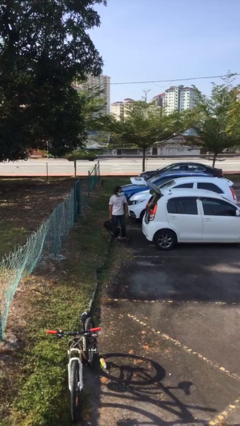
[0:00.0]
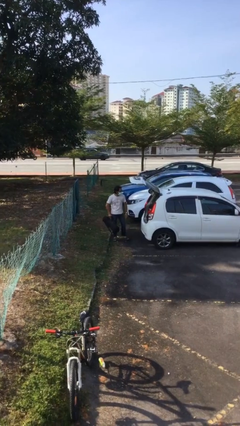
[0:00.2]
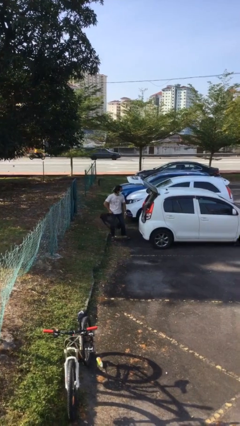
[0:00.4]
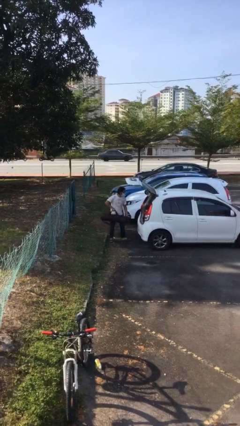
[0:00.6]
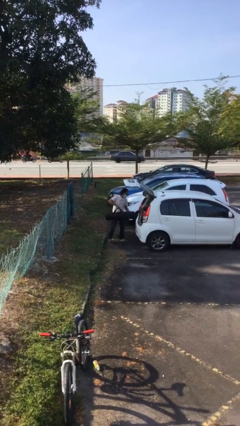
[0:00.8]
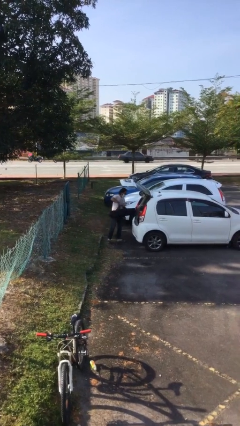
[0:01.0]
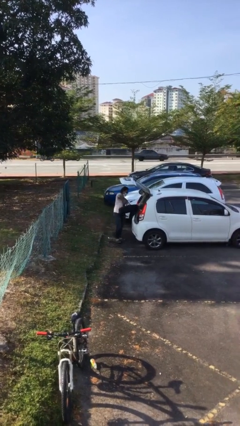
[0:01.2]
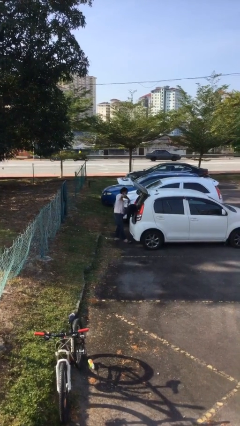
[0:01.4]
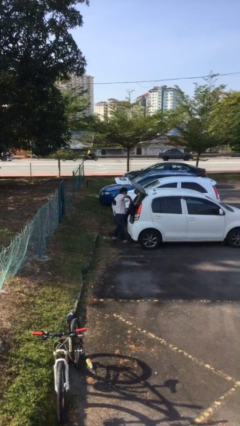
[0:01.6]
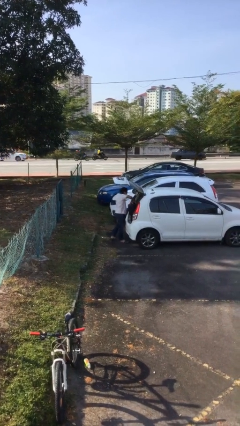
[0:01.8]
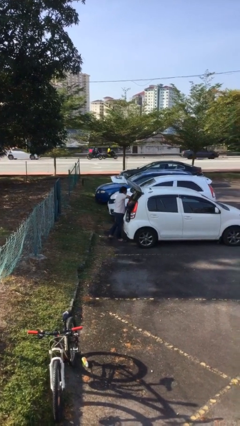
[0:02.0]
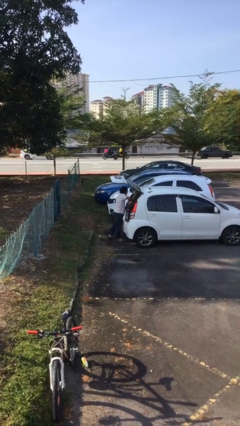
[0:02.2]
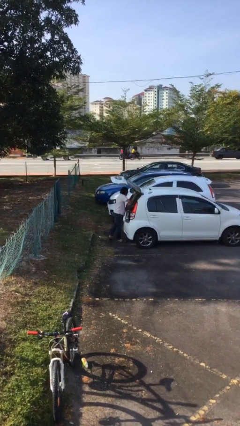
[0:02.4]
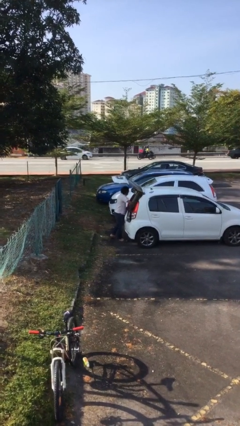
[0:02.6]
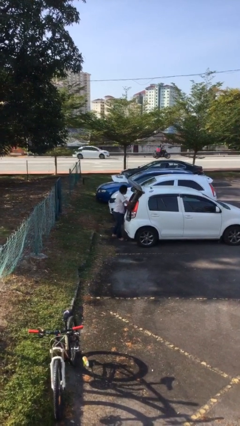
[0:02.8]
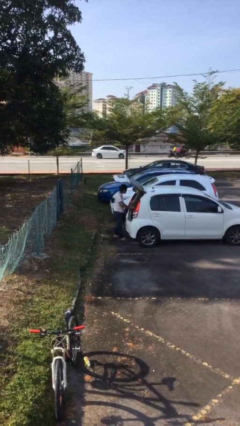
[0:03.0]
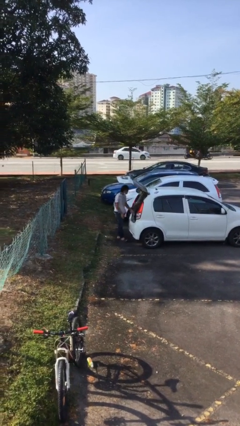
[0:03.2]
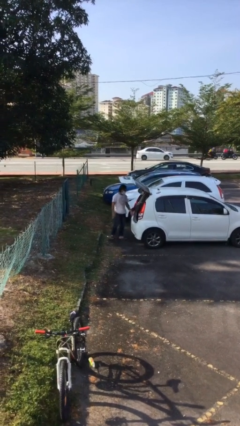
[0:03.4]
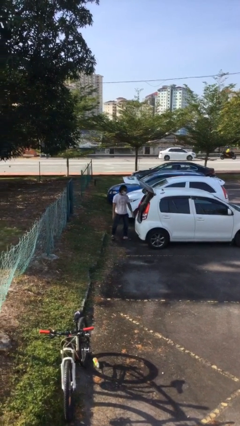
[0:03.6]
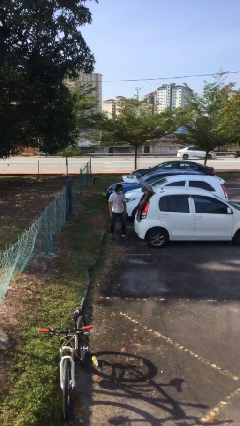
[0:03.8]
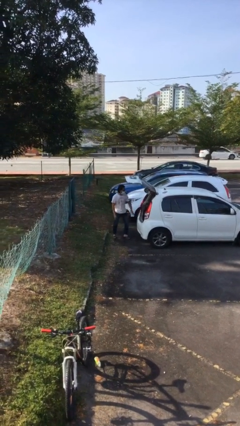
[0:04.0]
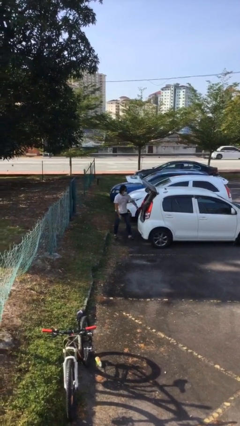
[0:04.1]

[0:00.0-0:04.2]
person loads car

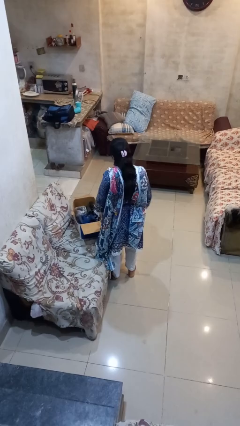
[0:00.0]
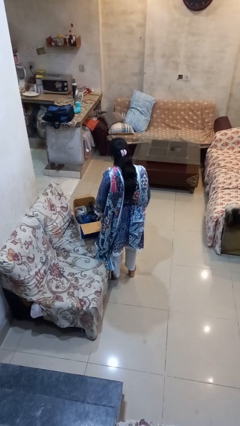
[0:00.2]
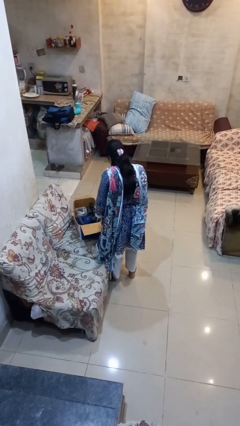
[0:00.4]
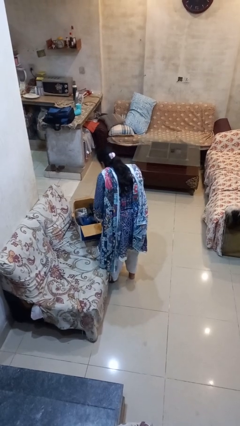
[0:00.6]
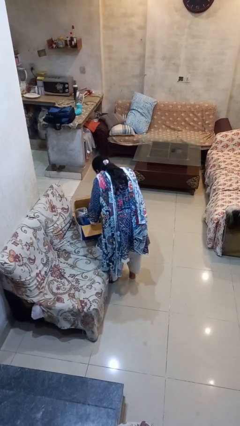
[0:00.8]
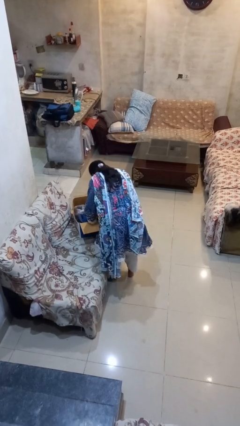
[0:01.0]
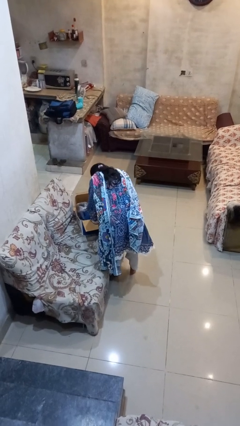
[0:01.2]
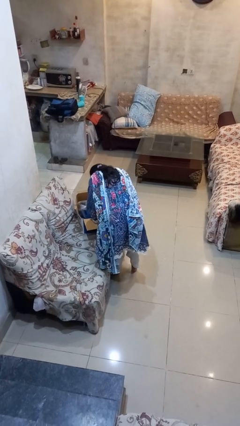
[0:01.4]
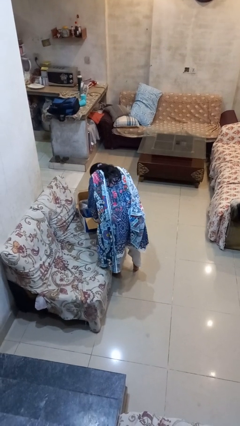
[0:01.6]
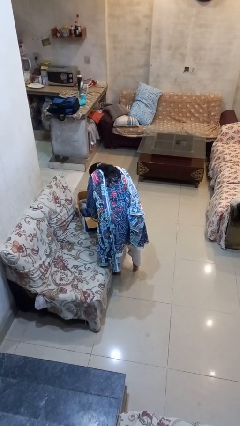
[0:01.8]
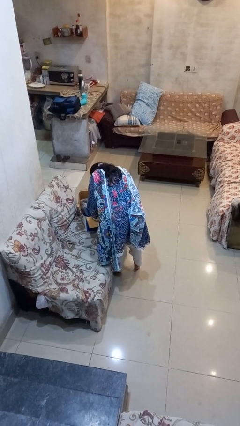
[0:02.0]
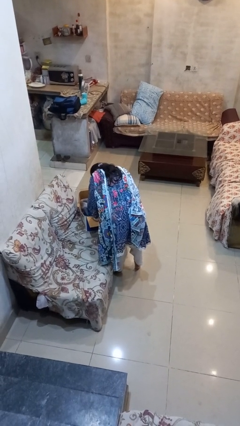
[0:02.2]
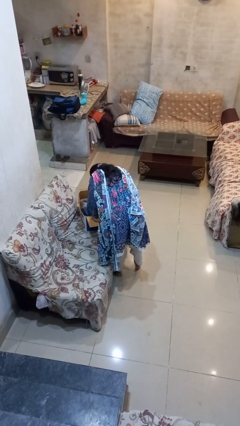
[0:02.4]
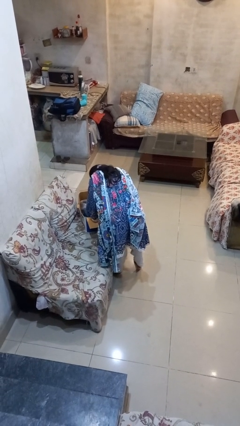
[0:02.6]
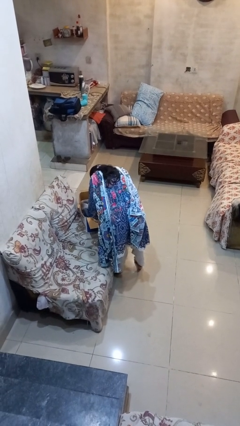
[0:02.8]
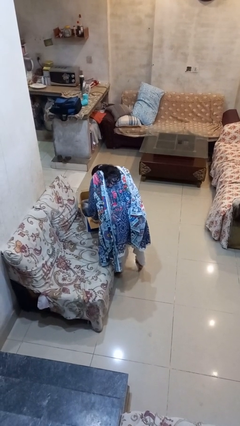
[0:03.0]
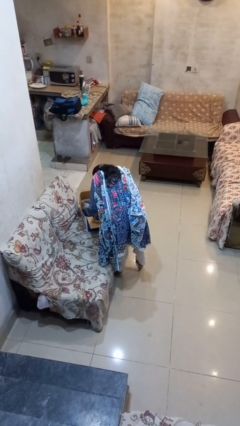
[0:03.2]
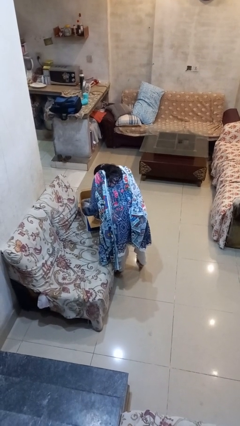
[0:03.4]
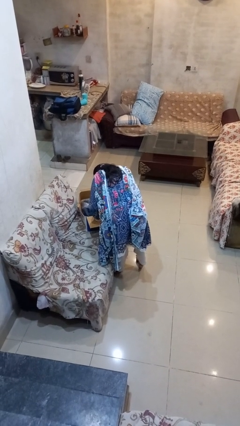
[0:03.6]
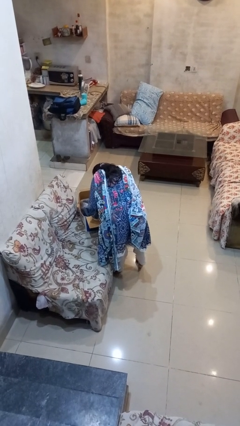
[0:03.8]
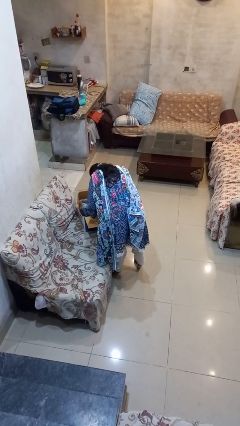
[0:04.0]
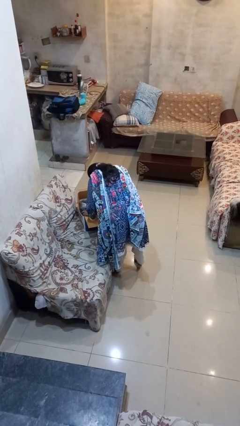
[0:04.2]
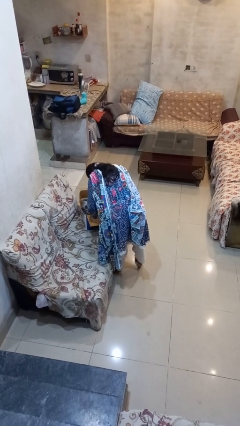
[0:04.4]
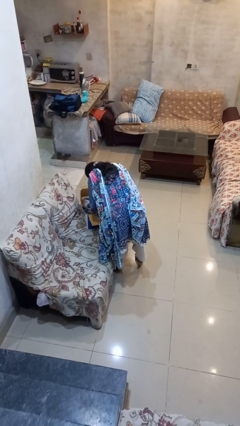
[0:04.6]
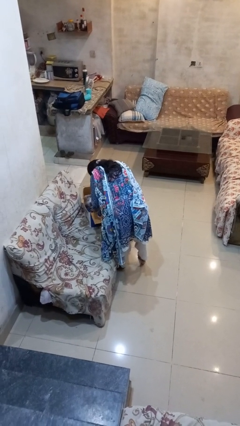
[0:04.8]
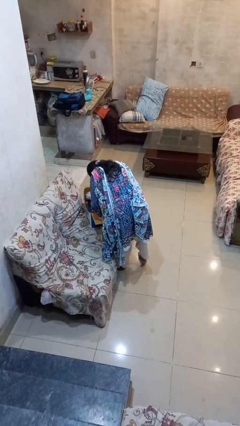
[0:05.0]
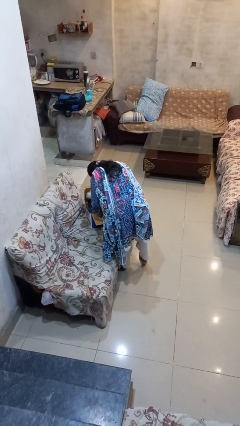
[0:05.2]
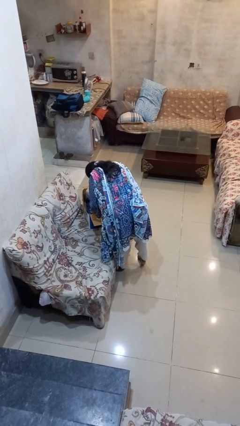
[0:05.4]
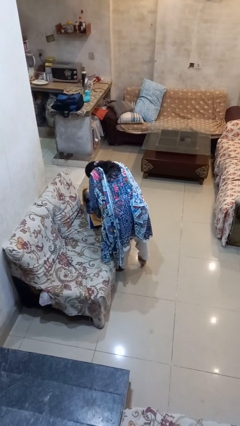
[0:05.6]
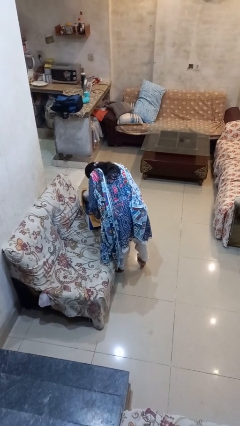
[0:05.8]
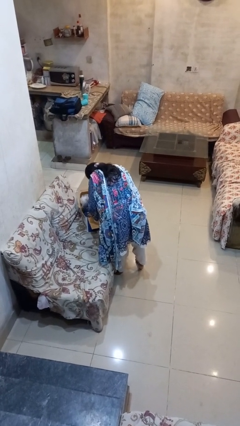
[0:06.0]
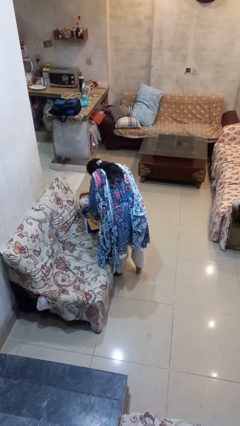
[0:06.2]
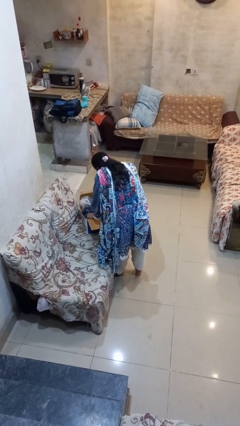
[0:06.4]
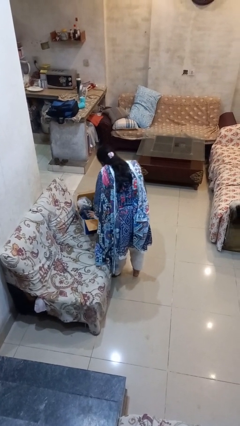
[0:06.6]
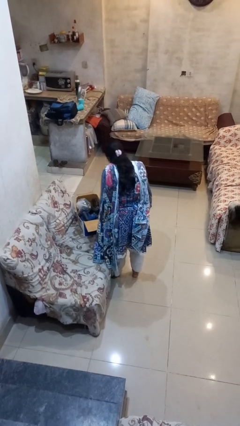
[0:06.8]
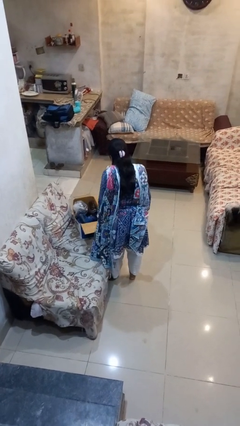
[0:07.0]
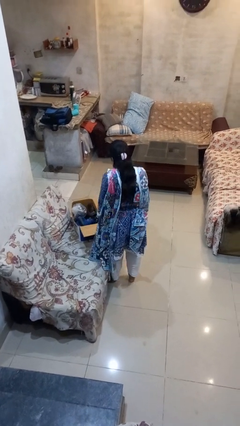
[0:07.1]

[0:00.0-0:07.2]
person searches in box

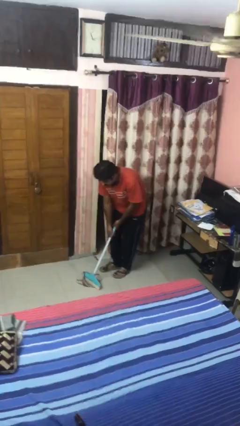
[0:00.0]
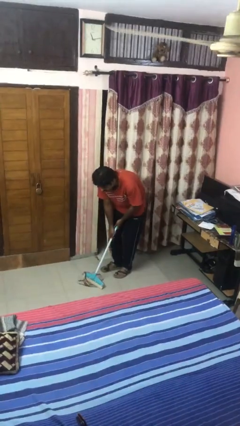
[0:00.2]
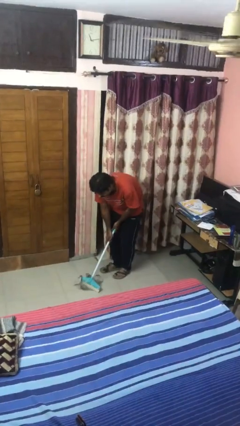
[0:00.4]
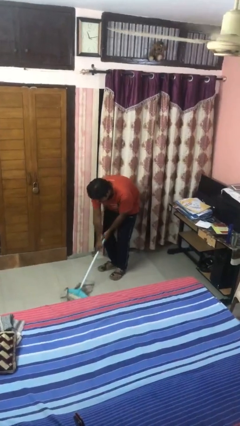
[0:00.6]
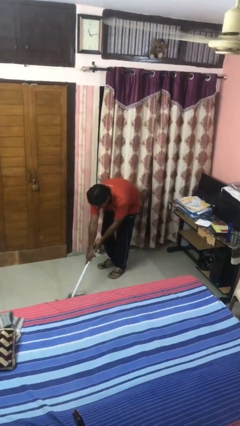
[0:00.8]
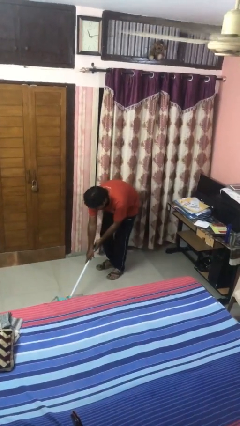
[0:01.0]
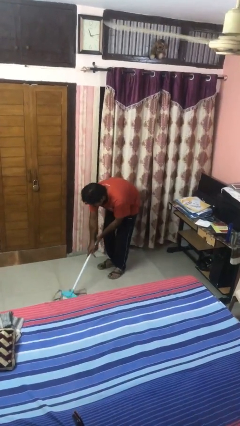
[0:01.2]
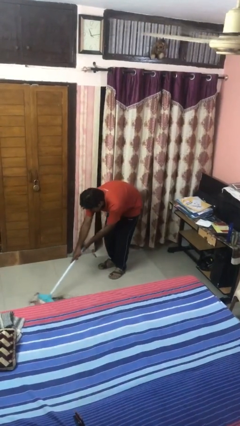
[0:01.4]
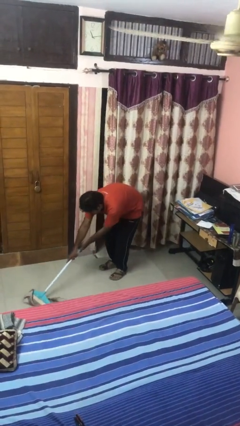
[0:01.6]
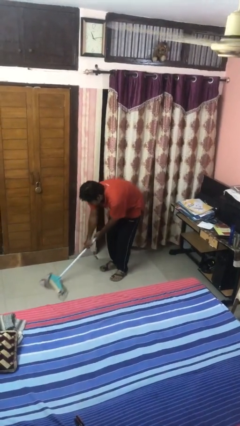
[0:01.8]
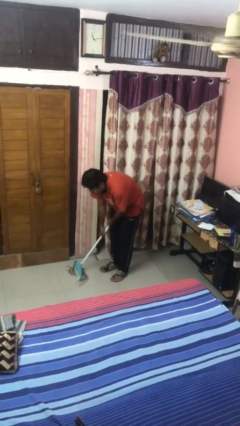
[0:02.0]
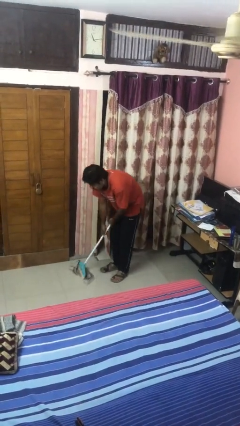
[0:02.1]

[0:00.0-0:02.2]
person mops

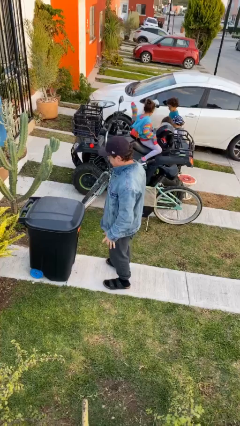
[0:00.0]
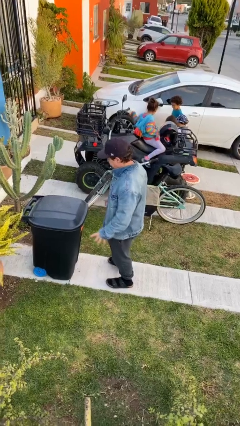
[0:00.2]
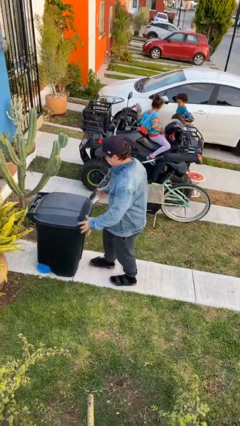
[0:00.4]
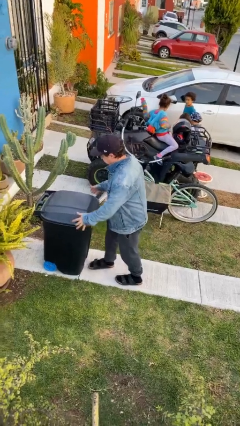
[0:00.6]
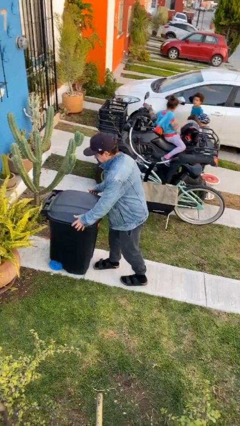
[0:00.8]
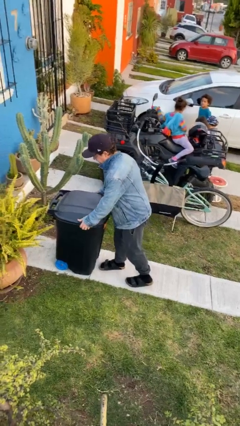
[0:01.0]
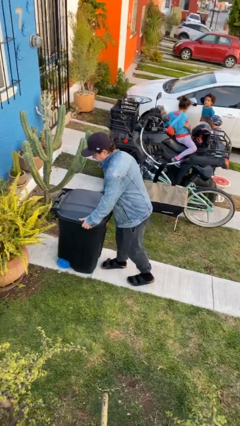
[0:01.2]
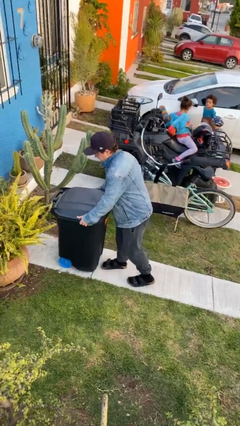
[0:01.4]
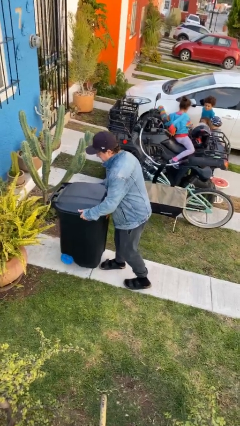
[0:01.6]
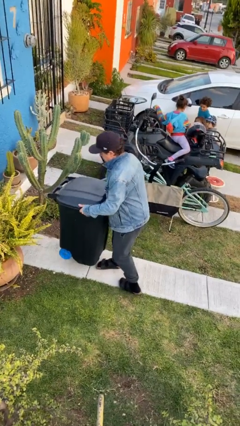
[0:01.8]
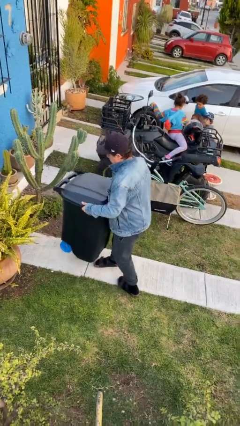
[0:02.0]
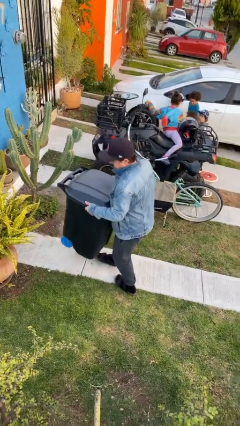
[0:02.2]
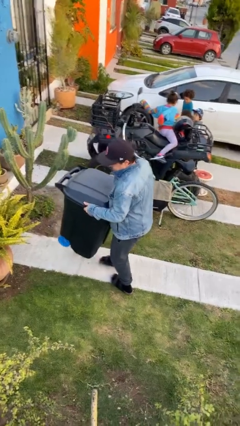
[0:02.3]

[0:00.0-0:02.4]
person picks up object from floor

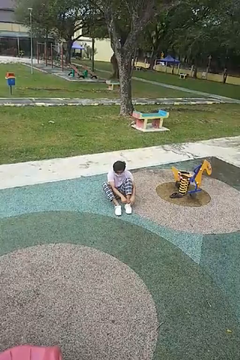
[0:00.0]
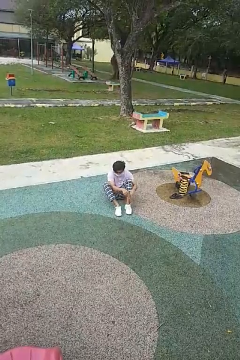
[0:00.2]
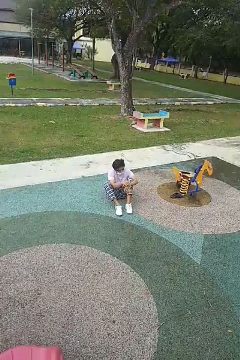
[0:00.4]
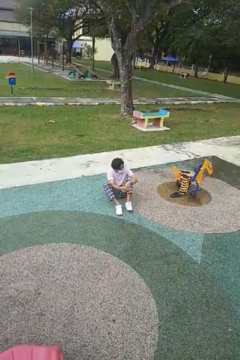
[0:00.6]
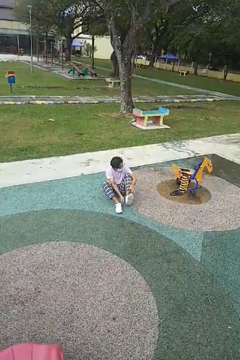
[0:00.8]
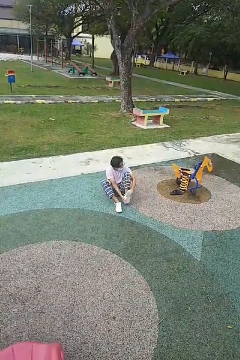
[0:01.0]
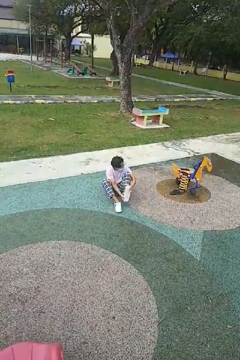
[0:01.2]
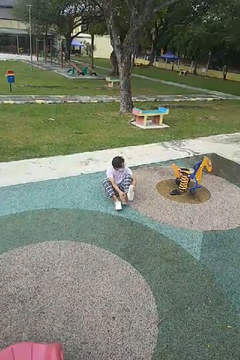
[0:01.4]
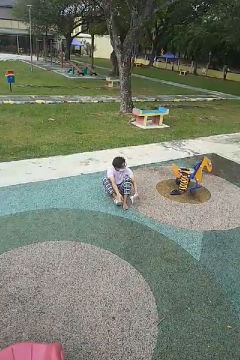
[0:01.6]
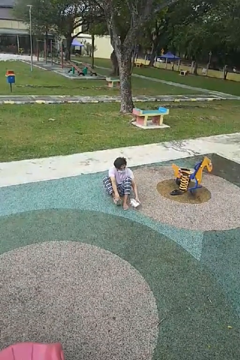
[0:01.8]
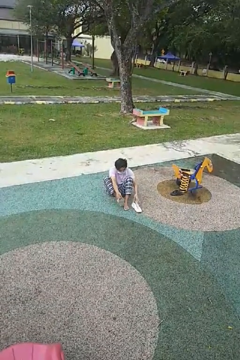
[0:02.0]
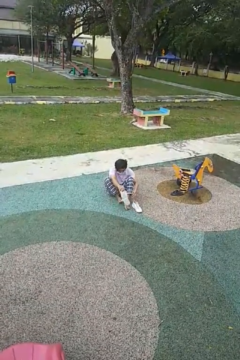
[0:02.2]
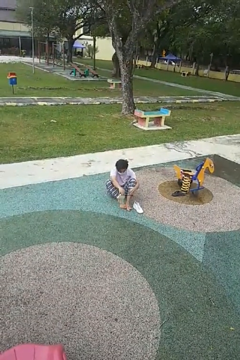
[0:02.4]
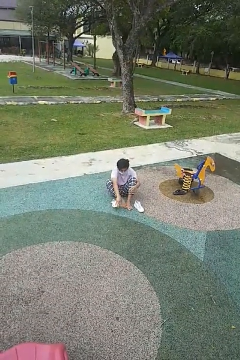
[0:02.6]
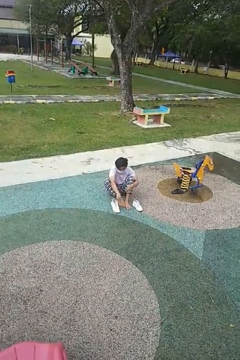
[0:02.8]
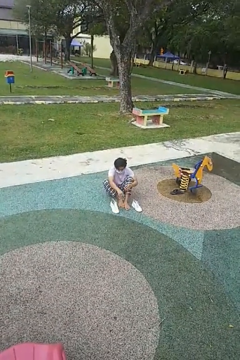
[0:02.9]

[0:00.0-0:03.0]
person takes off shoes
